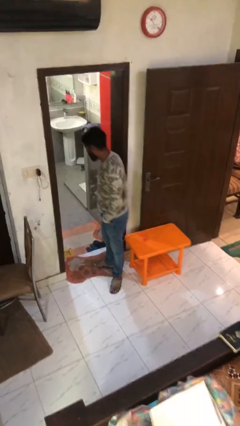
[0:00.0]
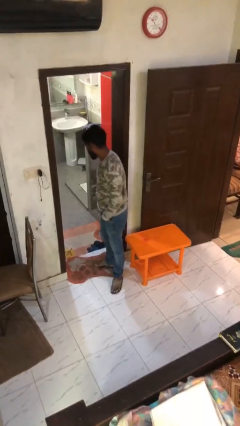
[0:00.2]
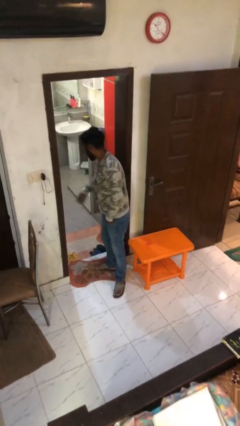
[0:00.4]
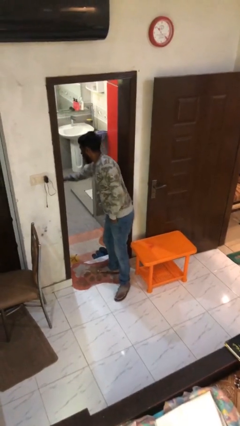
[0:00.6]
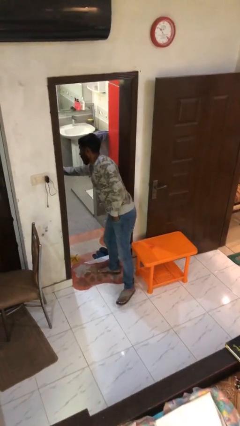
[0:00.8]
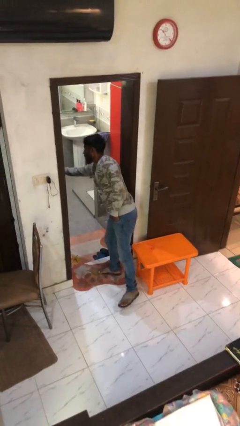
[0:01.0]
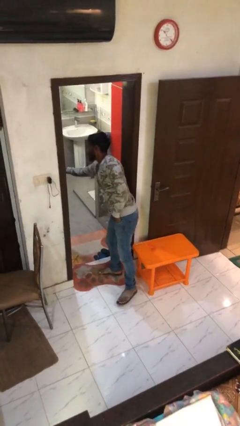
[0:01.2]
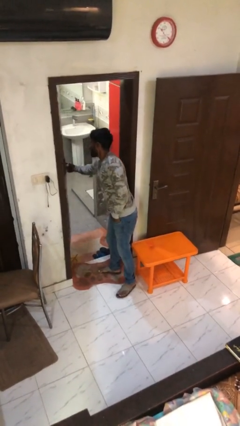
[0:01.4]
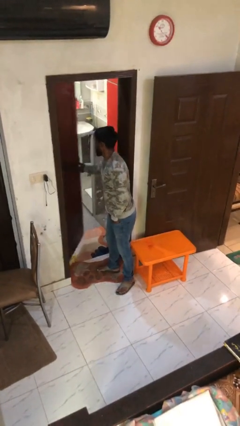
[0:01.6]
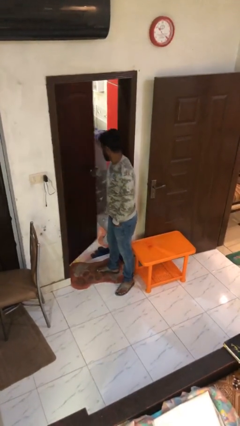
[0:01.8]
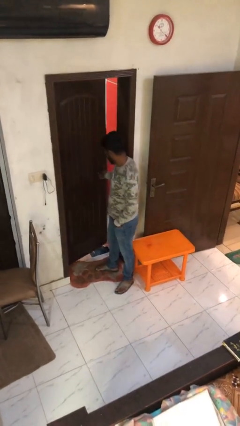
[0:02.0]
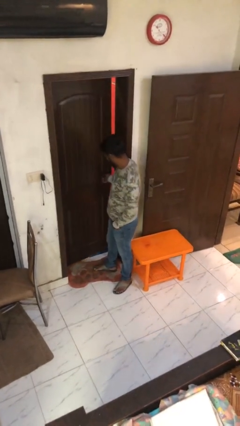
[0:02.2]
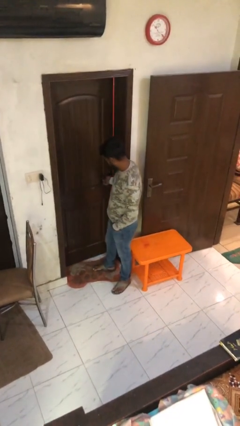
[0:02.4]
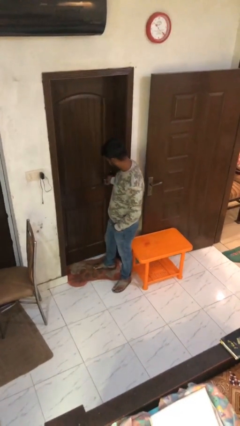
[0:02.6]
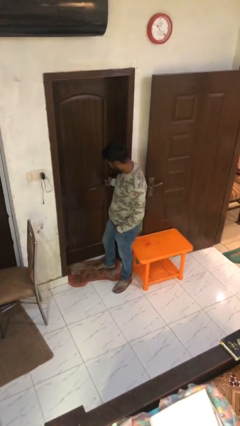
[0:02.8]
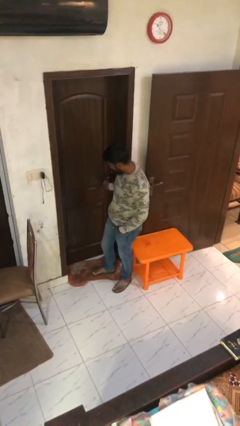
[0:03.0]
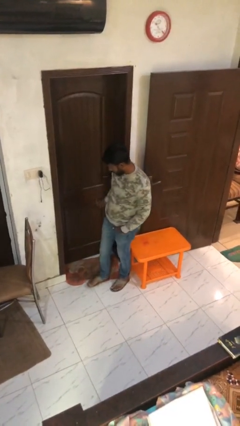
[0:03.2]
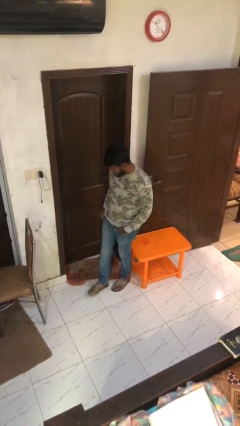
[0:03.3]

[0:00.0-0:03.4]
person closes facility door

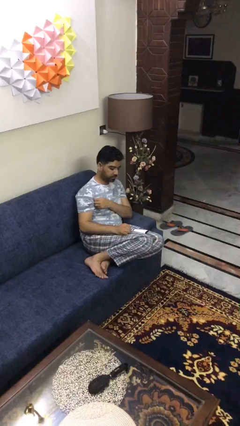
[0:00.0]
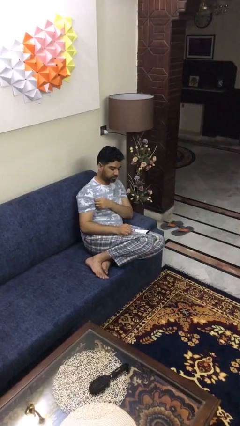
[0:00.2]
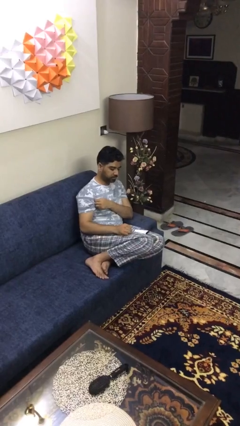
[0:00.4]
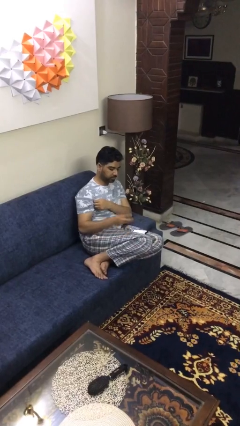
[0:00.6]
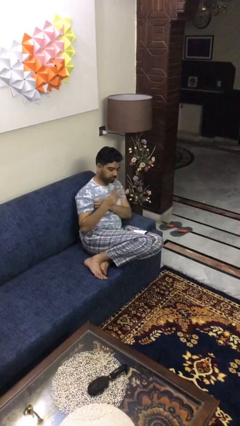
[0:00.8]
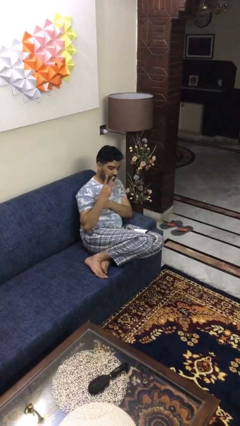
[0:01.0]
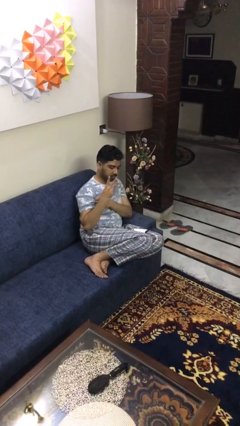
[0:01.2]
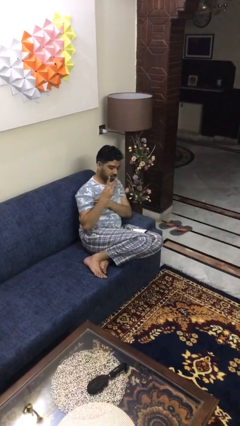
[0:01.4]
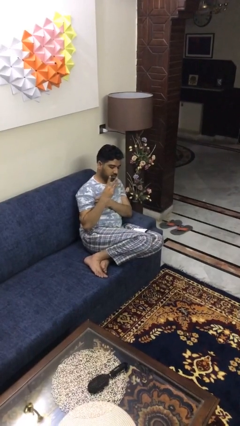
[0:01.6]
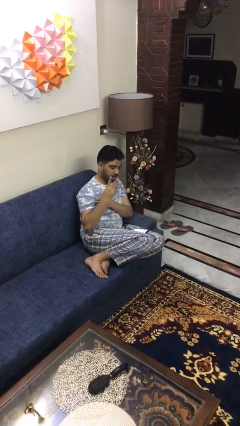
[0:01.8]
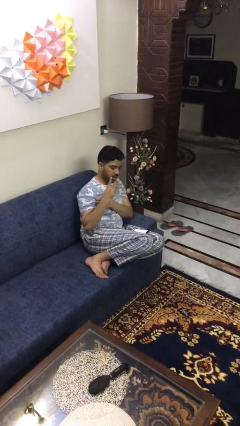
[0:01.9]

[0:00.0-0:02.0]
person gestures number three

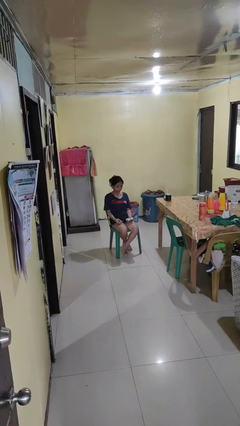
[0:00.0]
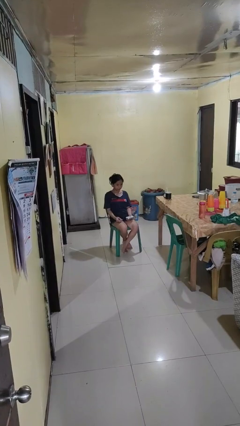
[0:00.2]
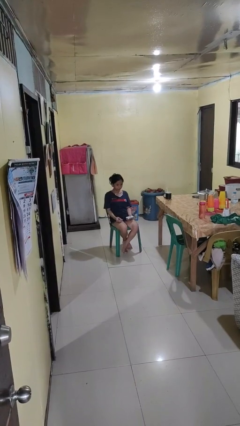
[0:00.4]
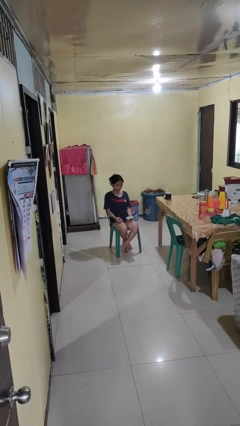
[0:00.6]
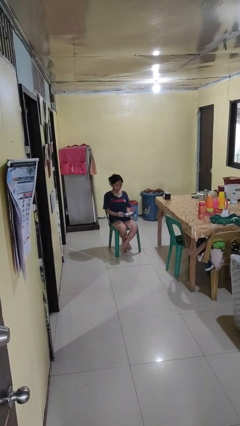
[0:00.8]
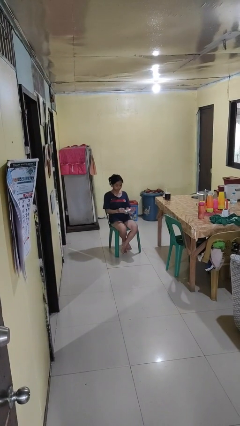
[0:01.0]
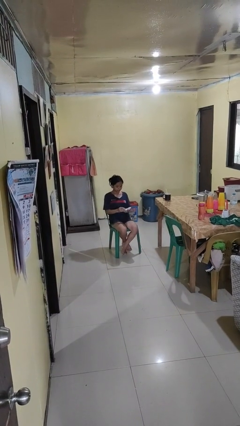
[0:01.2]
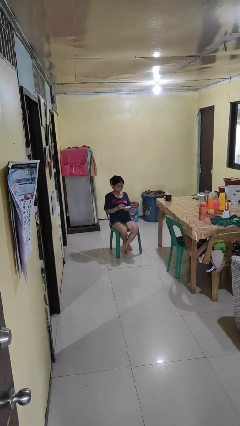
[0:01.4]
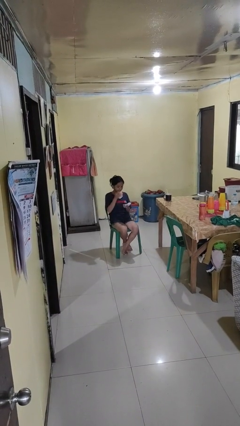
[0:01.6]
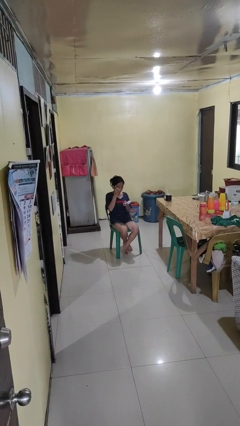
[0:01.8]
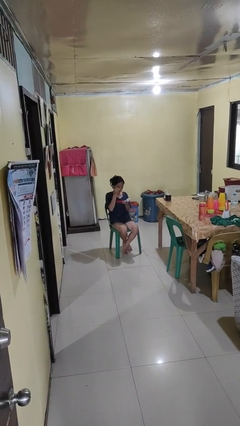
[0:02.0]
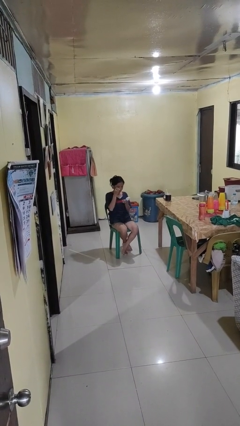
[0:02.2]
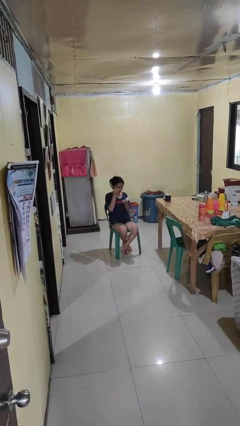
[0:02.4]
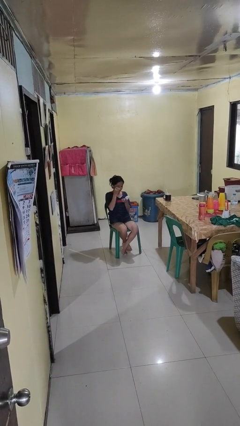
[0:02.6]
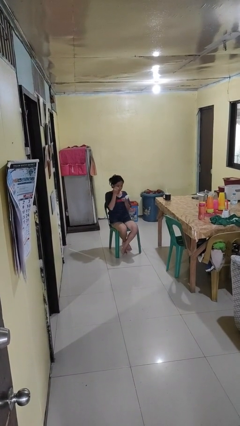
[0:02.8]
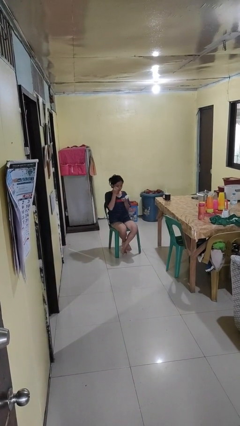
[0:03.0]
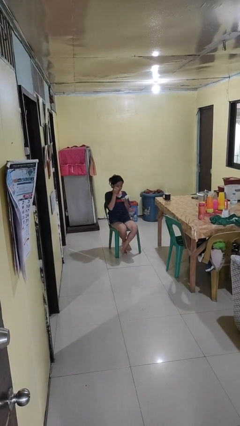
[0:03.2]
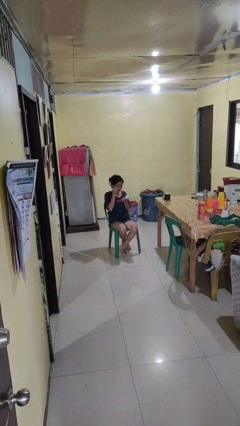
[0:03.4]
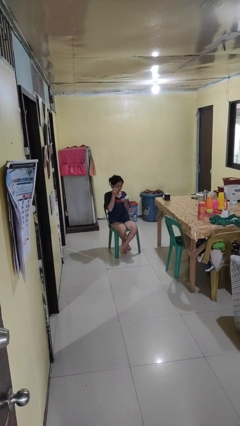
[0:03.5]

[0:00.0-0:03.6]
person applies eye makeup

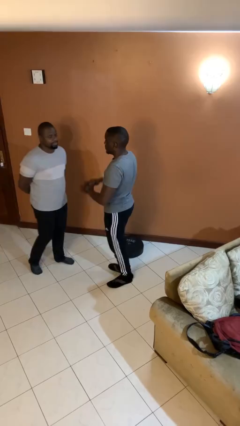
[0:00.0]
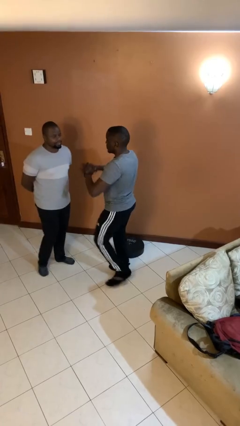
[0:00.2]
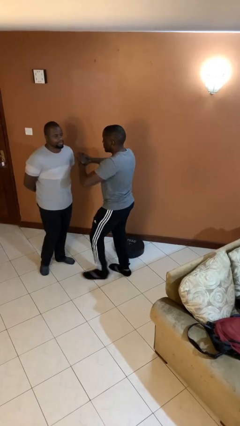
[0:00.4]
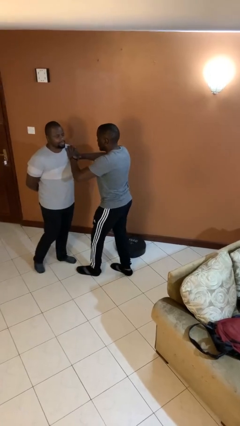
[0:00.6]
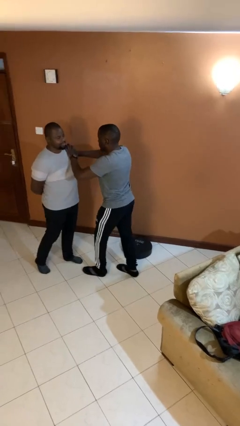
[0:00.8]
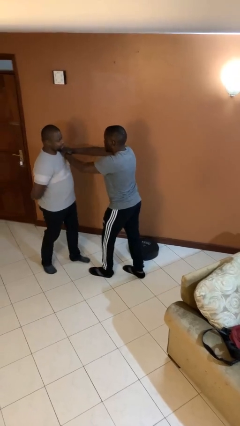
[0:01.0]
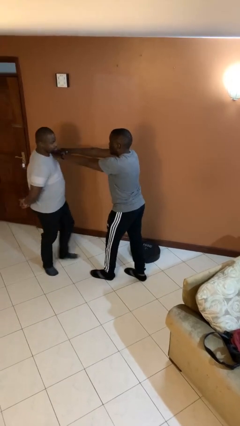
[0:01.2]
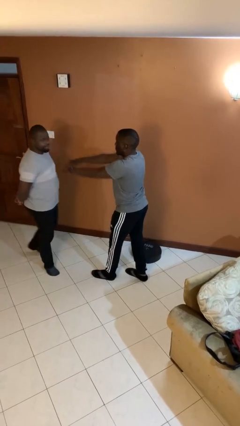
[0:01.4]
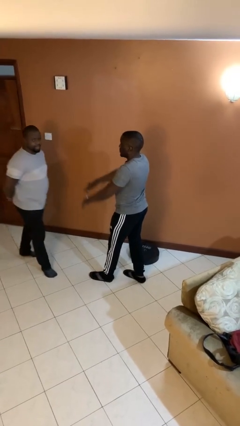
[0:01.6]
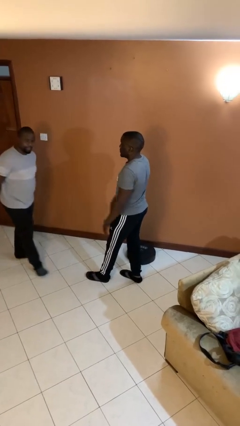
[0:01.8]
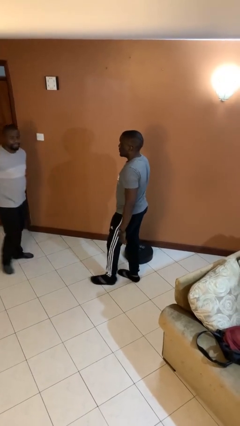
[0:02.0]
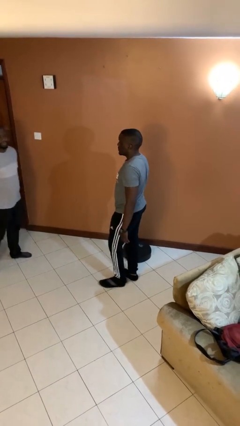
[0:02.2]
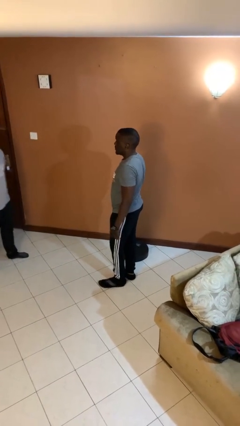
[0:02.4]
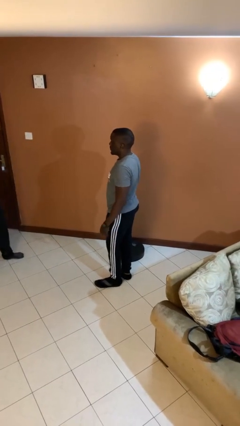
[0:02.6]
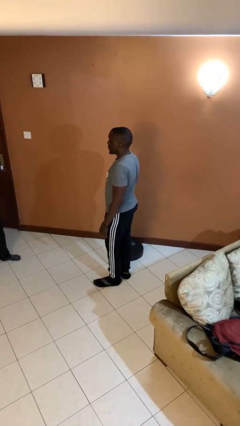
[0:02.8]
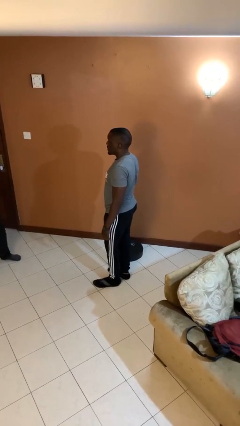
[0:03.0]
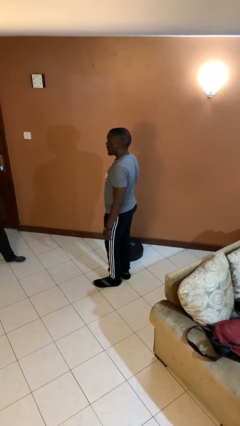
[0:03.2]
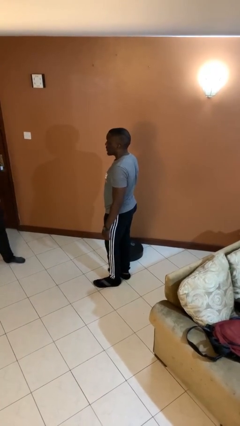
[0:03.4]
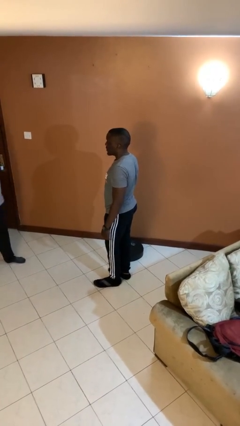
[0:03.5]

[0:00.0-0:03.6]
person shoves person

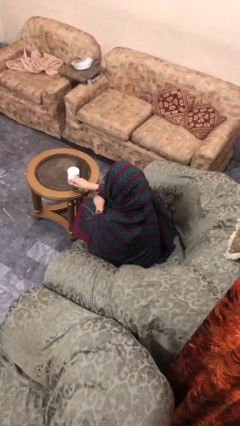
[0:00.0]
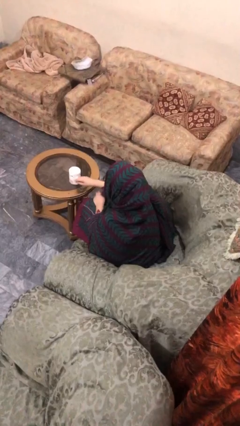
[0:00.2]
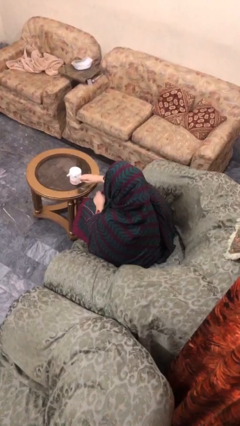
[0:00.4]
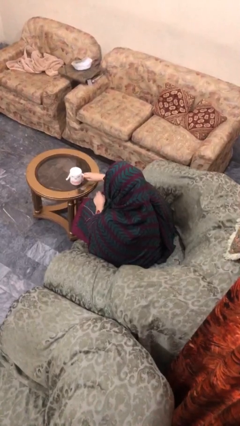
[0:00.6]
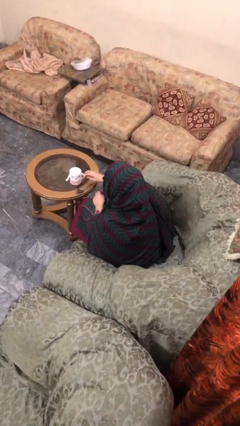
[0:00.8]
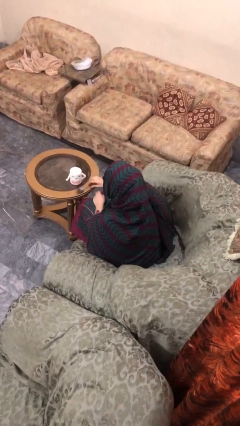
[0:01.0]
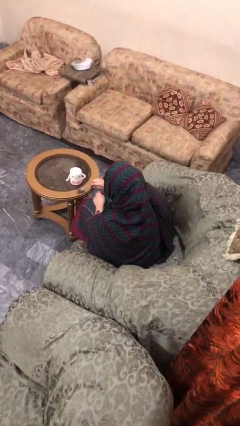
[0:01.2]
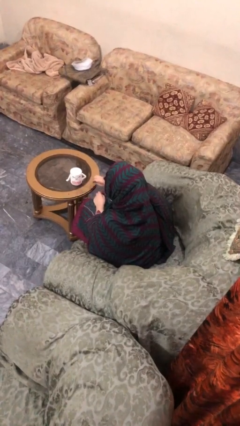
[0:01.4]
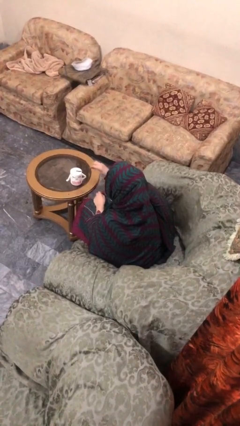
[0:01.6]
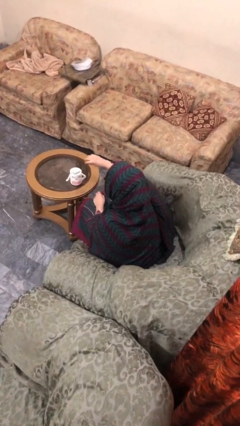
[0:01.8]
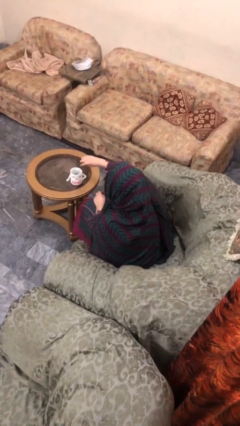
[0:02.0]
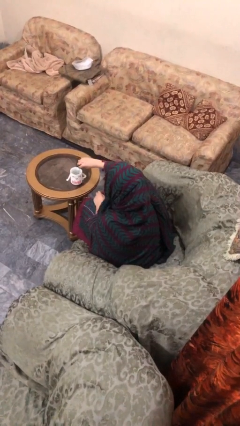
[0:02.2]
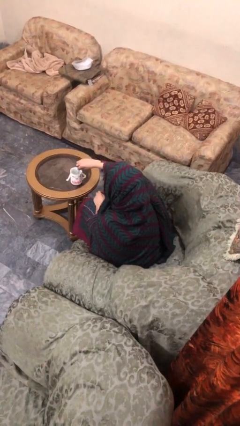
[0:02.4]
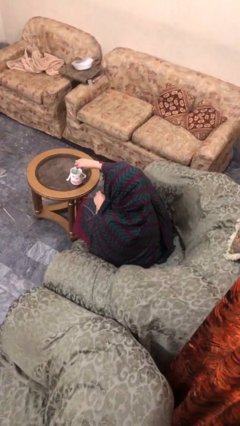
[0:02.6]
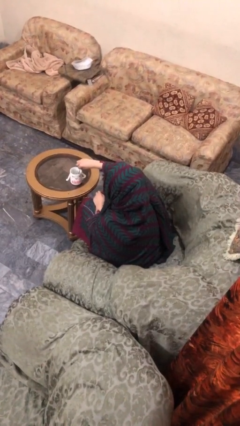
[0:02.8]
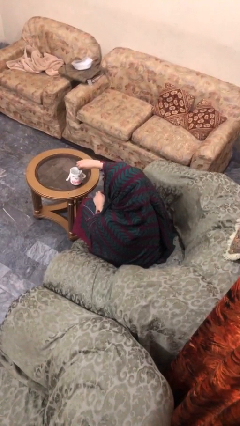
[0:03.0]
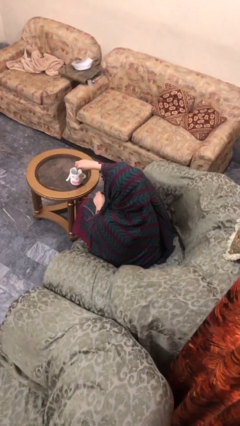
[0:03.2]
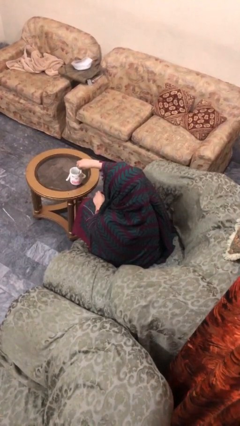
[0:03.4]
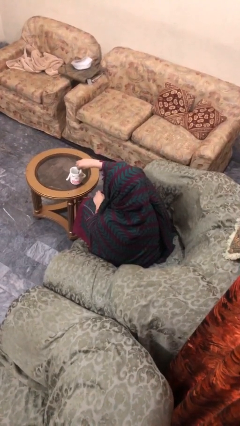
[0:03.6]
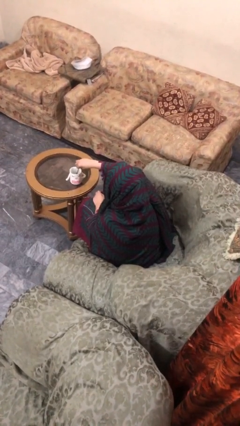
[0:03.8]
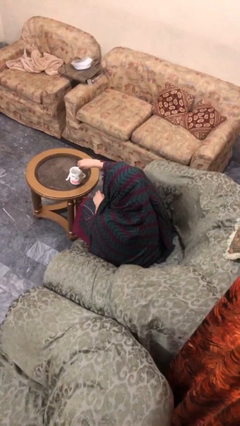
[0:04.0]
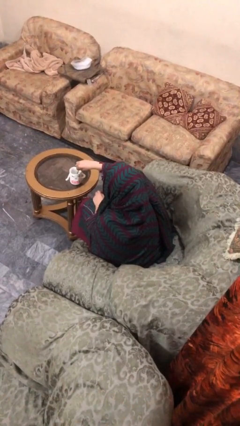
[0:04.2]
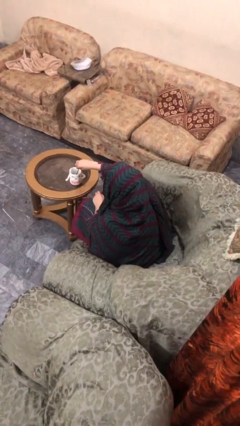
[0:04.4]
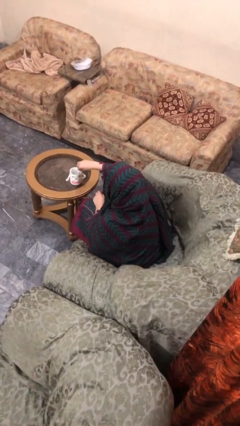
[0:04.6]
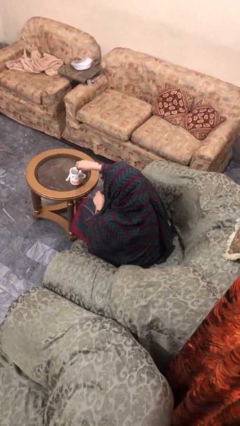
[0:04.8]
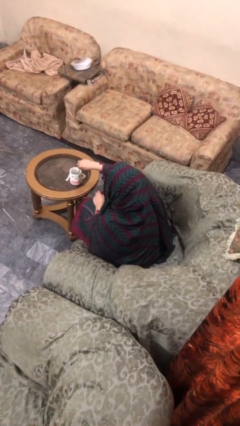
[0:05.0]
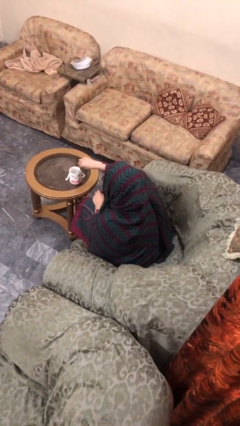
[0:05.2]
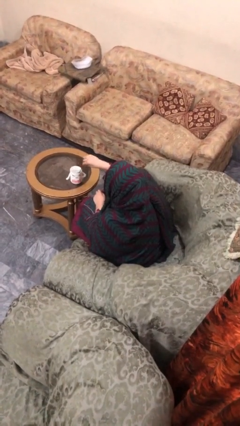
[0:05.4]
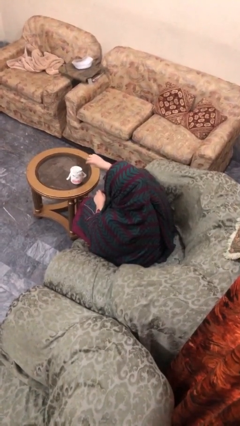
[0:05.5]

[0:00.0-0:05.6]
person stirs mug
